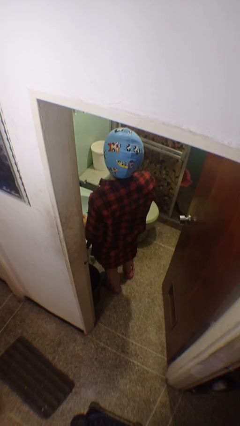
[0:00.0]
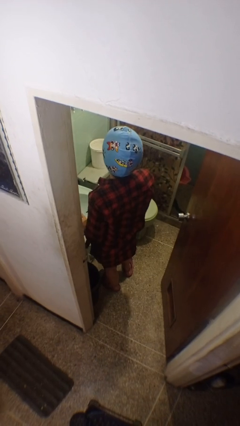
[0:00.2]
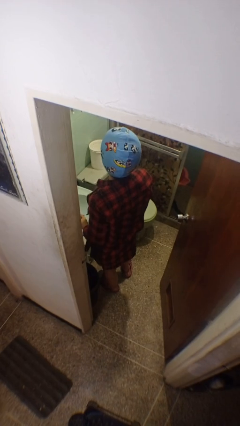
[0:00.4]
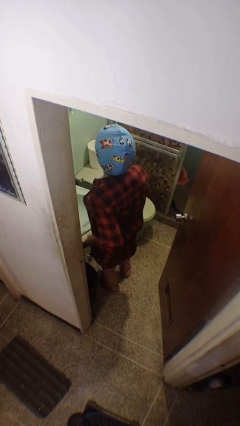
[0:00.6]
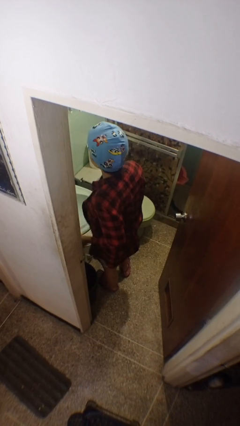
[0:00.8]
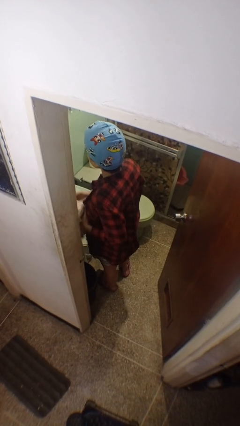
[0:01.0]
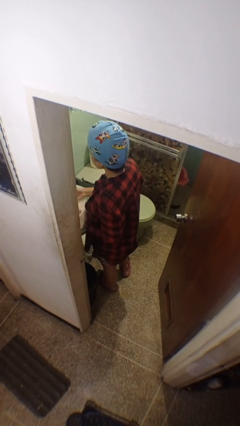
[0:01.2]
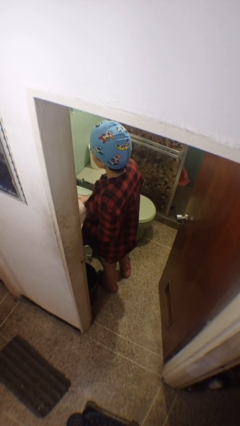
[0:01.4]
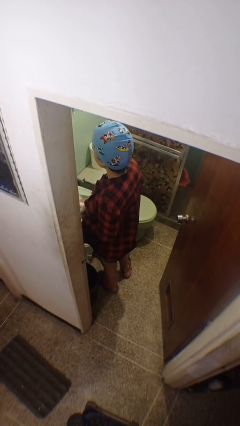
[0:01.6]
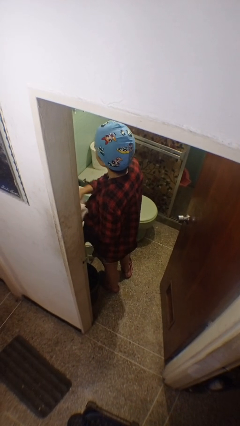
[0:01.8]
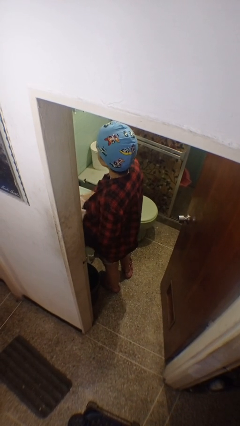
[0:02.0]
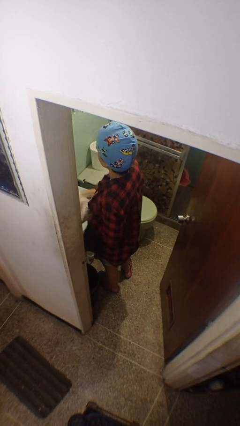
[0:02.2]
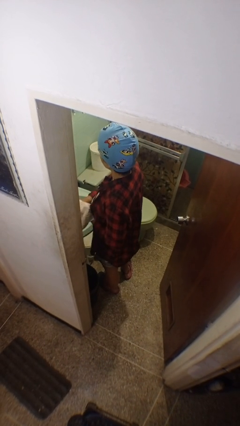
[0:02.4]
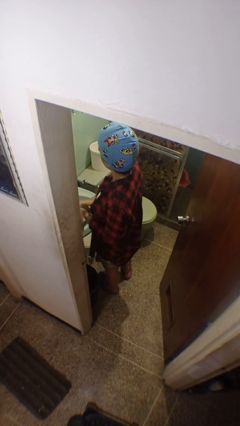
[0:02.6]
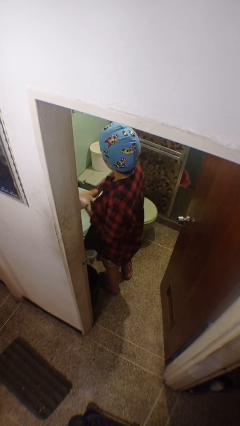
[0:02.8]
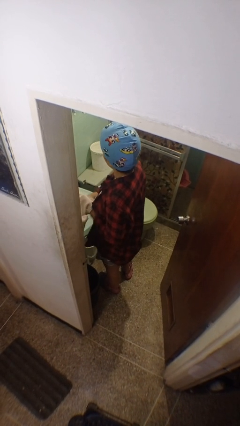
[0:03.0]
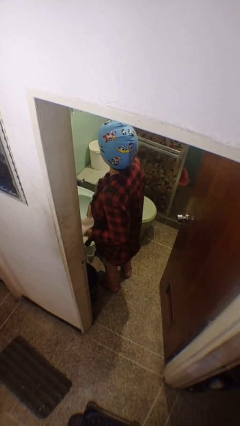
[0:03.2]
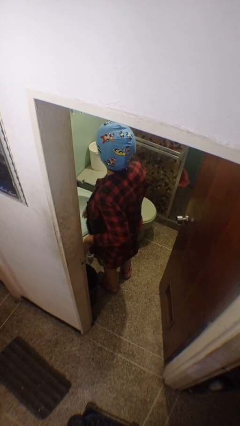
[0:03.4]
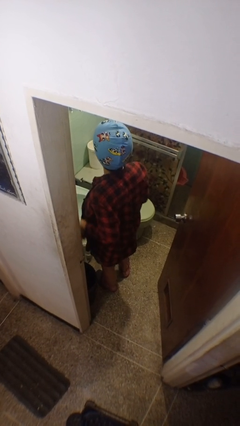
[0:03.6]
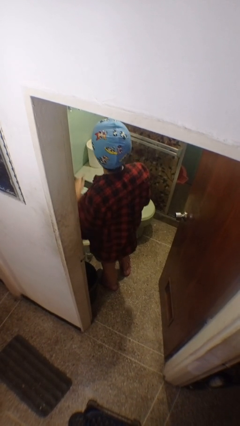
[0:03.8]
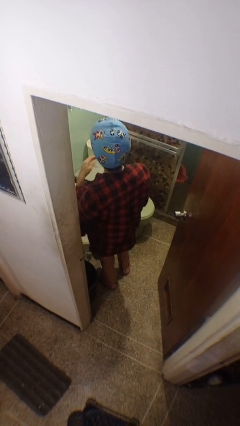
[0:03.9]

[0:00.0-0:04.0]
person dries hands with towel

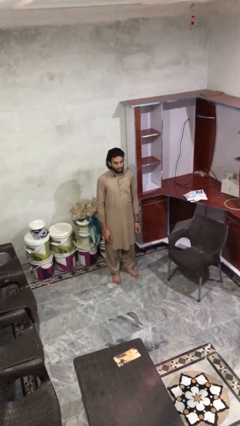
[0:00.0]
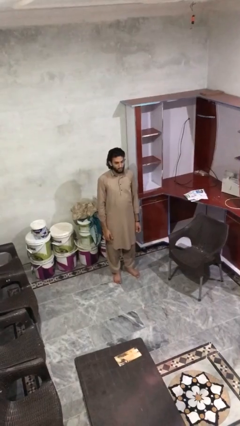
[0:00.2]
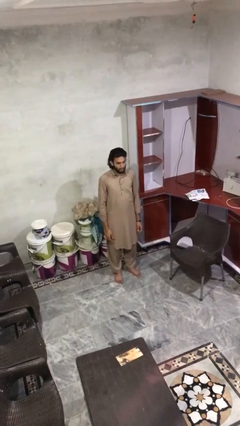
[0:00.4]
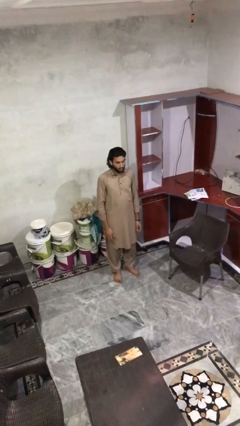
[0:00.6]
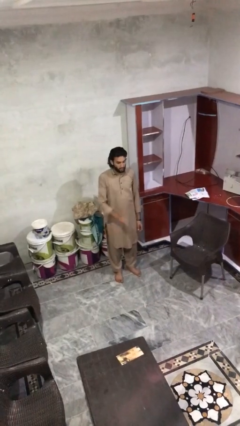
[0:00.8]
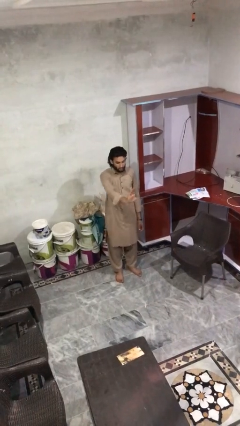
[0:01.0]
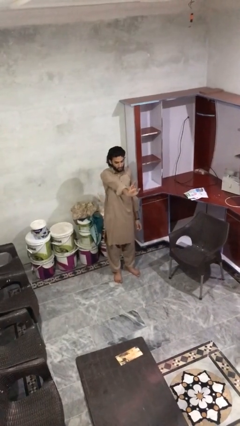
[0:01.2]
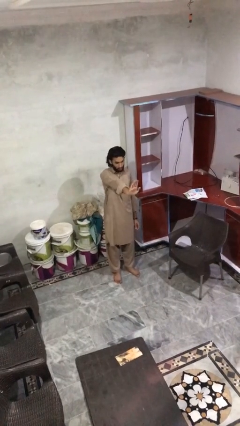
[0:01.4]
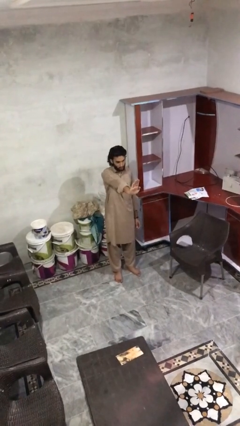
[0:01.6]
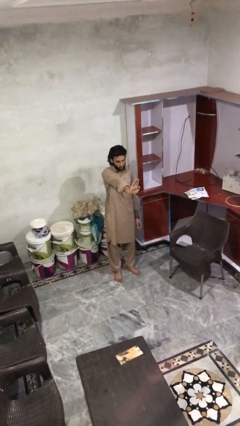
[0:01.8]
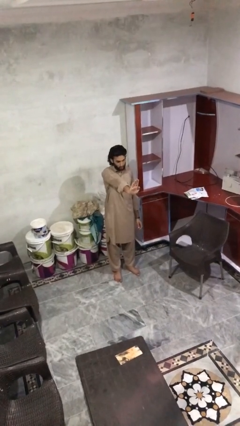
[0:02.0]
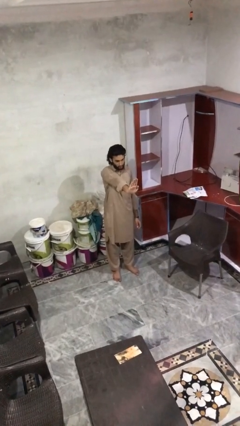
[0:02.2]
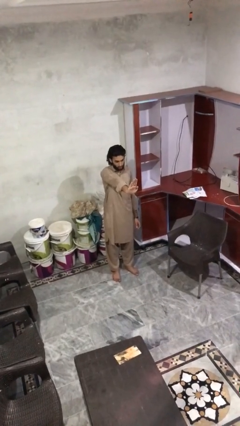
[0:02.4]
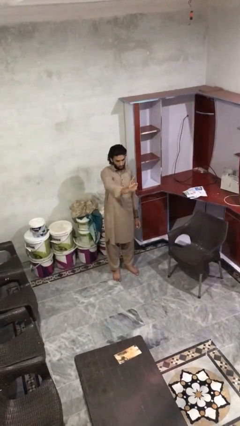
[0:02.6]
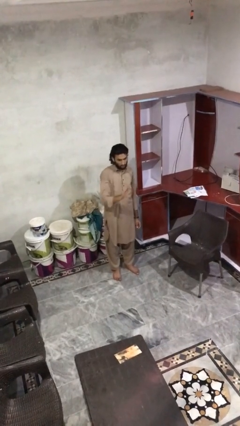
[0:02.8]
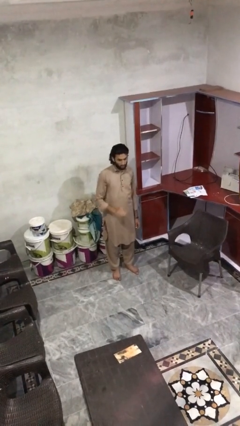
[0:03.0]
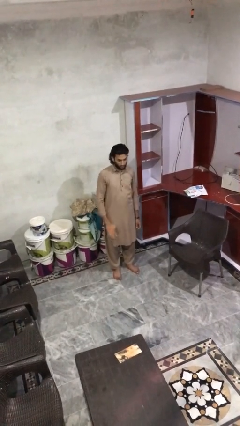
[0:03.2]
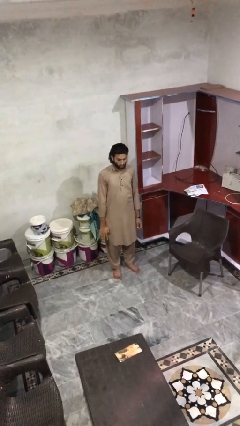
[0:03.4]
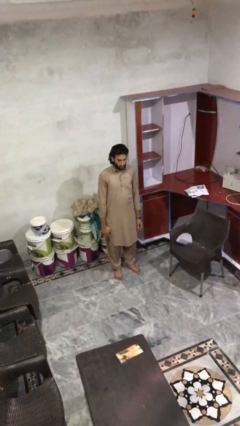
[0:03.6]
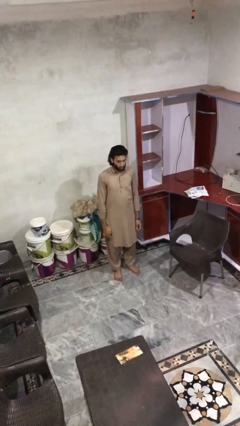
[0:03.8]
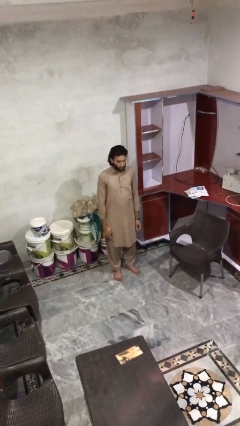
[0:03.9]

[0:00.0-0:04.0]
person gestures stop

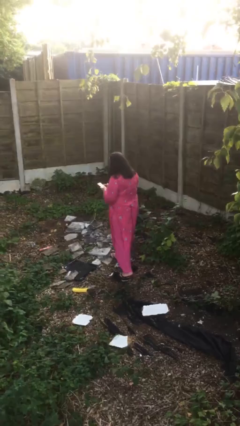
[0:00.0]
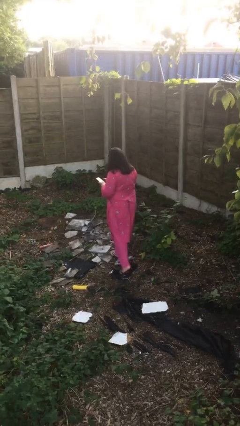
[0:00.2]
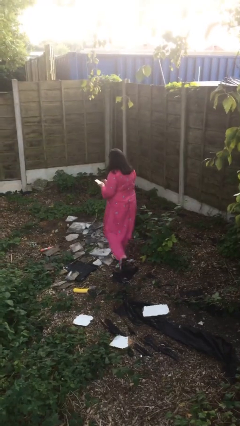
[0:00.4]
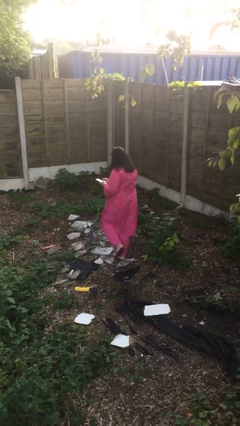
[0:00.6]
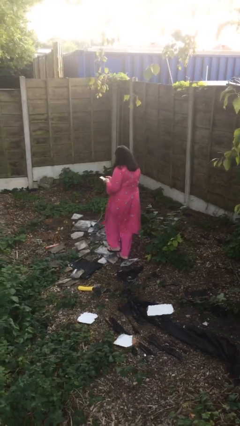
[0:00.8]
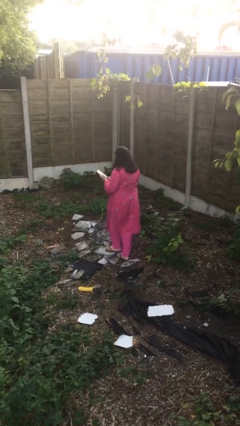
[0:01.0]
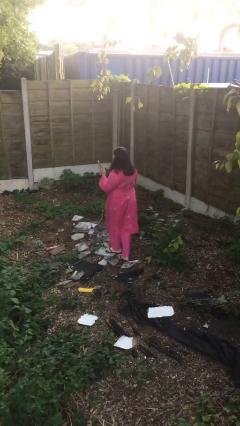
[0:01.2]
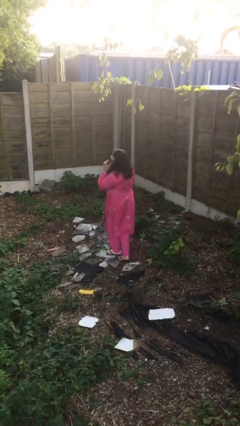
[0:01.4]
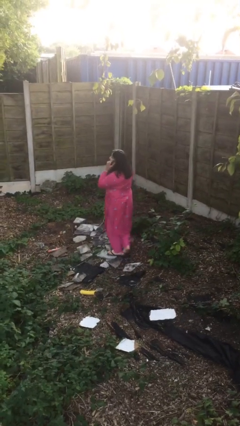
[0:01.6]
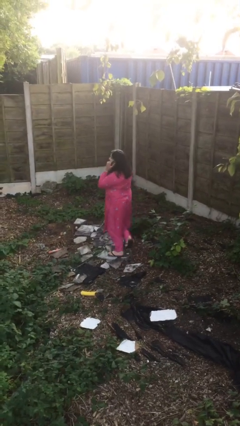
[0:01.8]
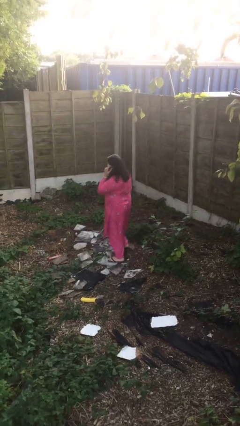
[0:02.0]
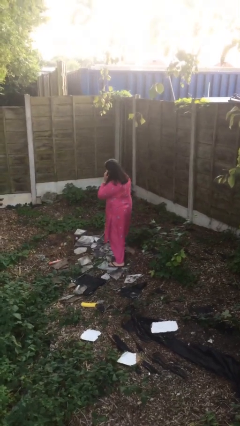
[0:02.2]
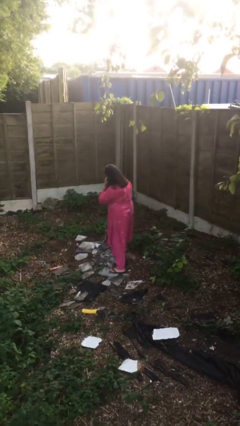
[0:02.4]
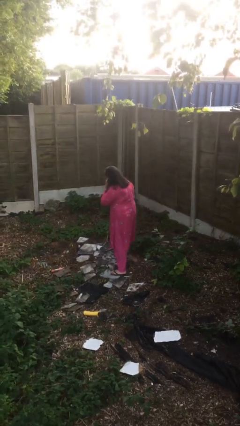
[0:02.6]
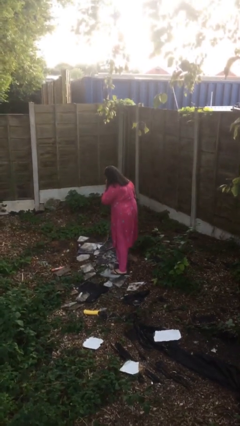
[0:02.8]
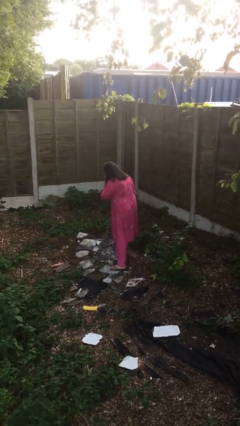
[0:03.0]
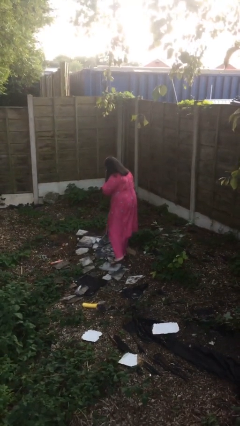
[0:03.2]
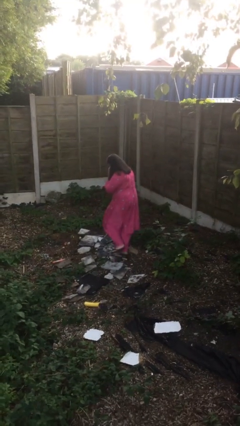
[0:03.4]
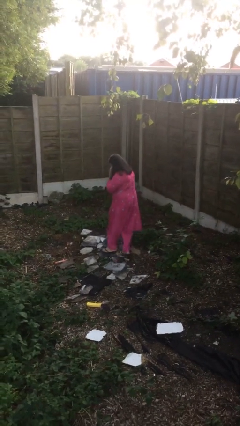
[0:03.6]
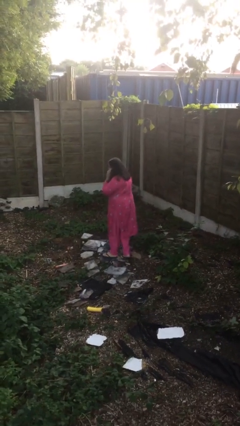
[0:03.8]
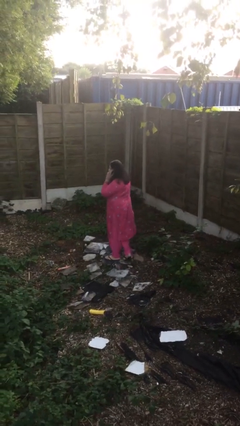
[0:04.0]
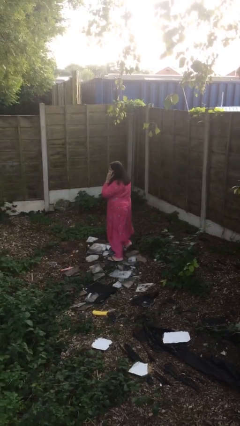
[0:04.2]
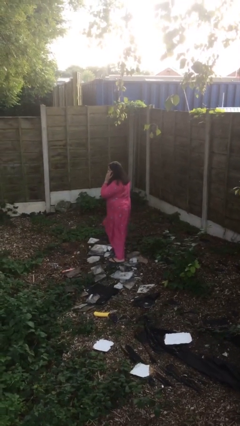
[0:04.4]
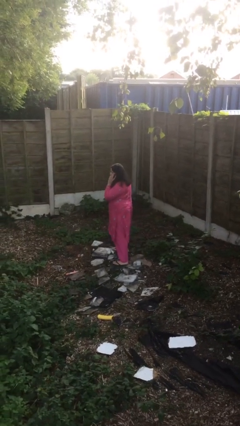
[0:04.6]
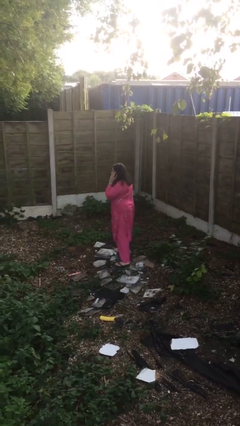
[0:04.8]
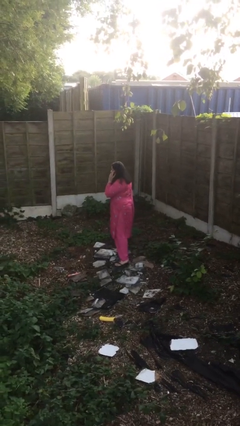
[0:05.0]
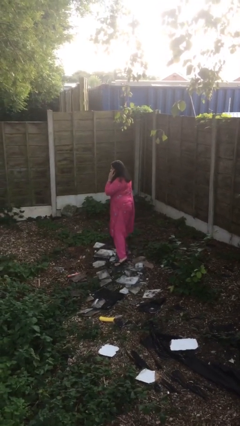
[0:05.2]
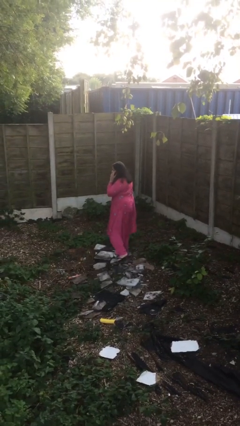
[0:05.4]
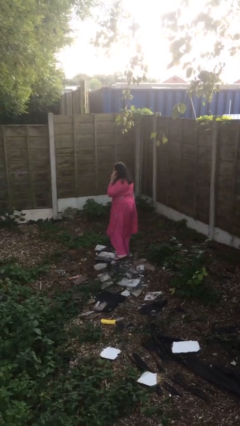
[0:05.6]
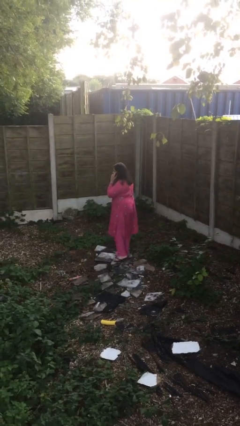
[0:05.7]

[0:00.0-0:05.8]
person talks on phone

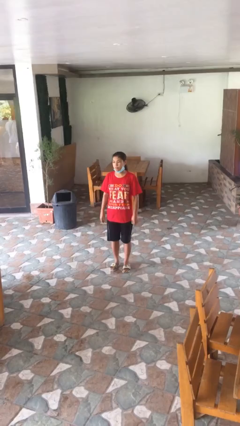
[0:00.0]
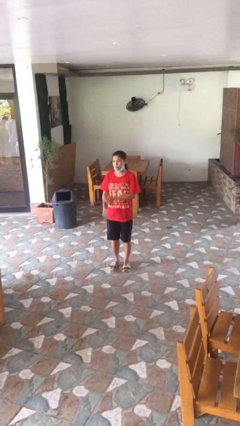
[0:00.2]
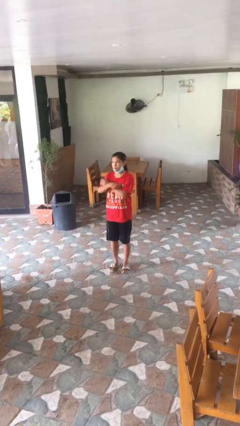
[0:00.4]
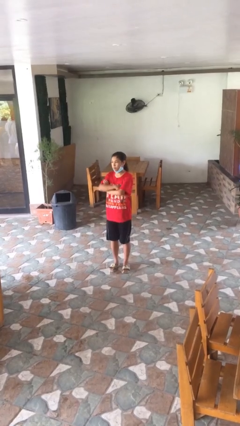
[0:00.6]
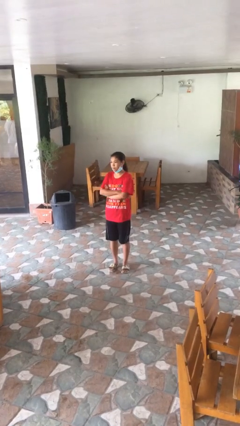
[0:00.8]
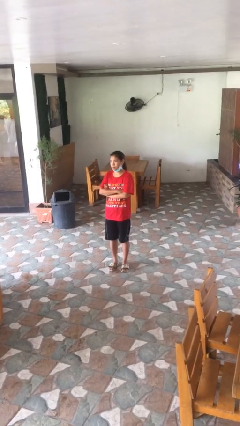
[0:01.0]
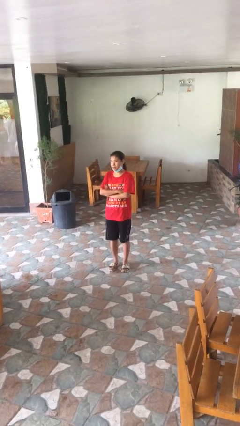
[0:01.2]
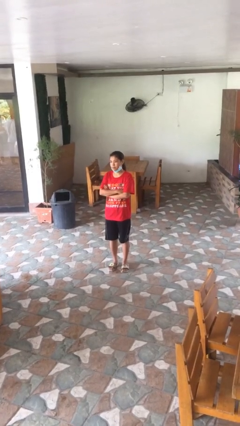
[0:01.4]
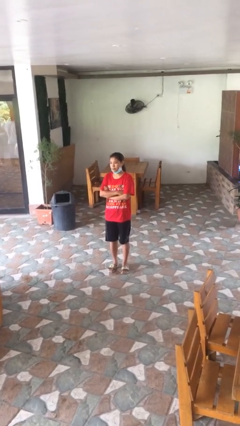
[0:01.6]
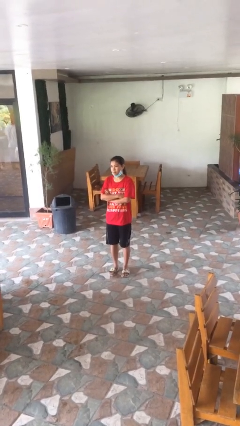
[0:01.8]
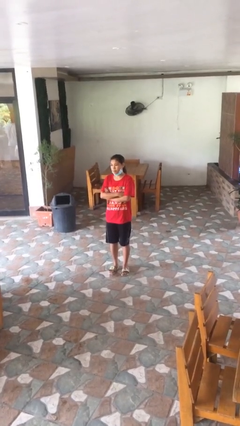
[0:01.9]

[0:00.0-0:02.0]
person crosses arms

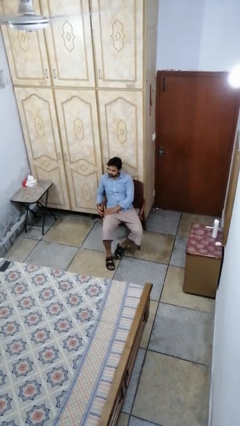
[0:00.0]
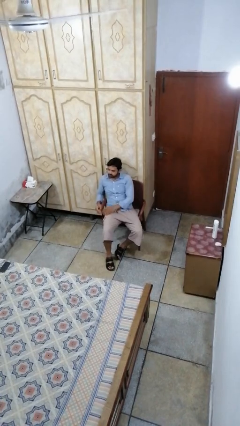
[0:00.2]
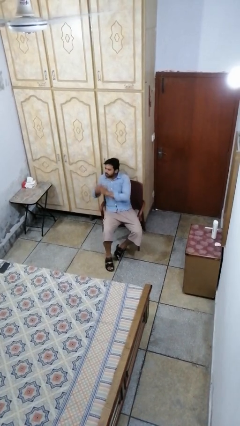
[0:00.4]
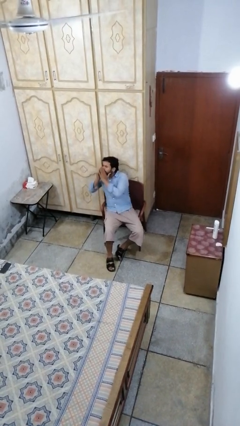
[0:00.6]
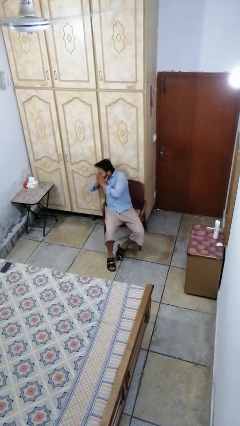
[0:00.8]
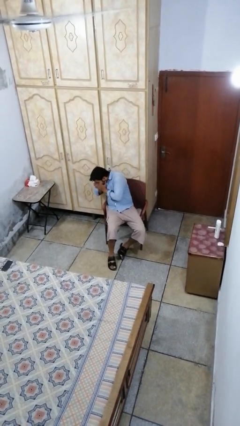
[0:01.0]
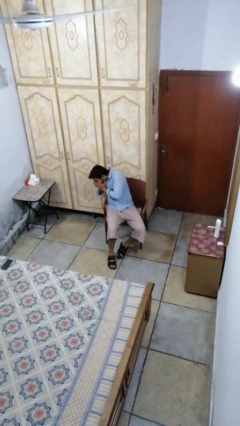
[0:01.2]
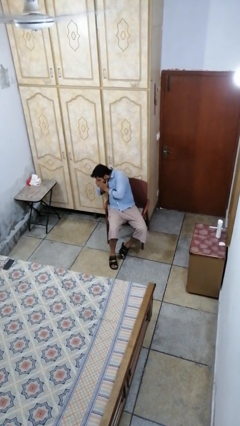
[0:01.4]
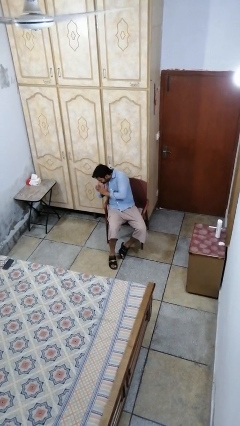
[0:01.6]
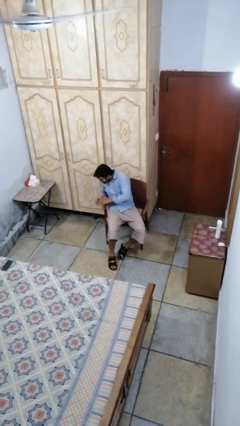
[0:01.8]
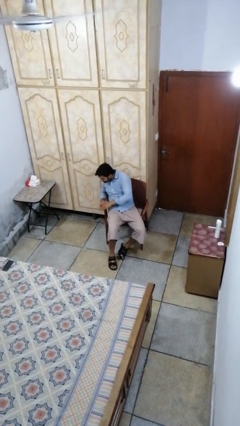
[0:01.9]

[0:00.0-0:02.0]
person sneezes into hand
